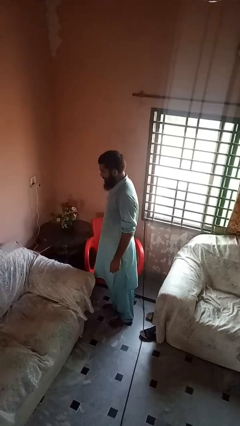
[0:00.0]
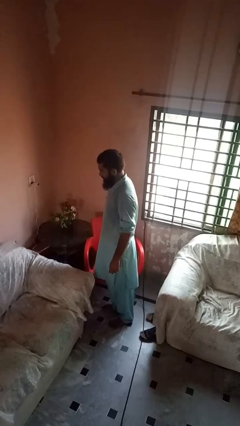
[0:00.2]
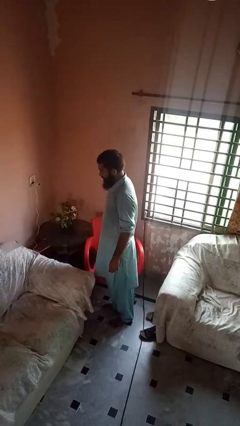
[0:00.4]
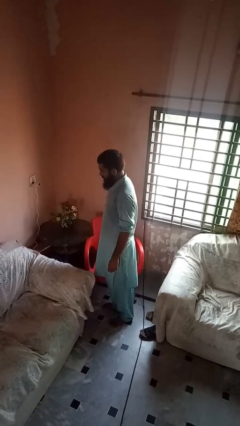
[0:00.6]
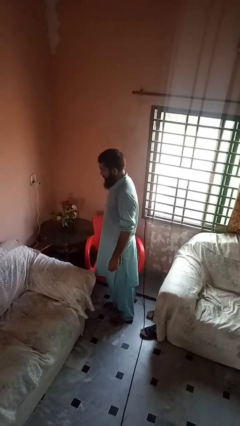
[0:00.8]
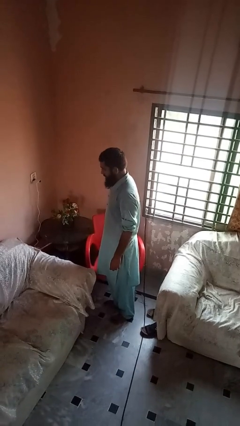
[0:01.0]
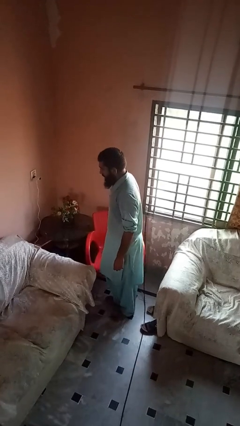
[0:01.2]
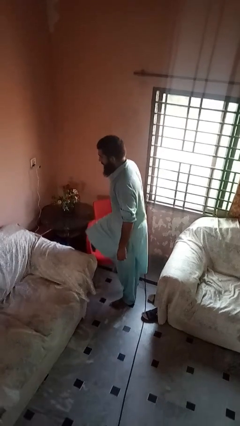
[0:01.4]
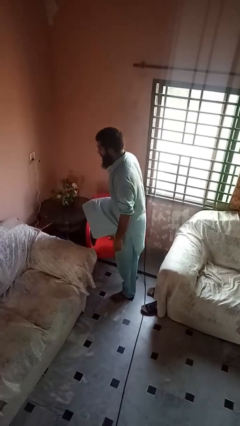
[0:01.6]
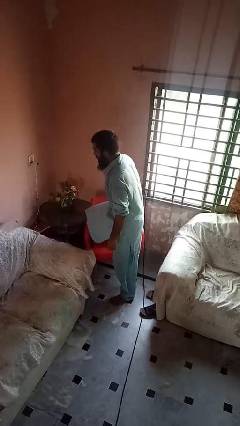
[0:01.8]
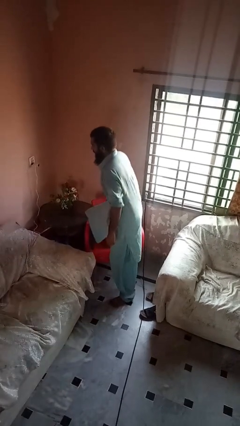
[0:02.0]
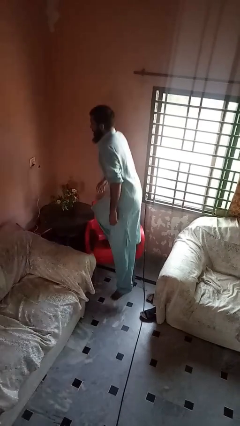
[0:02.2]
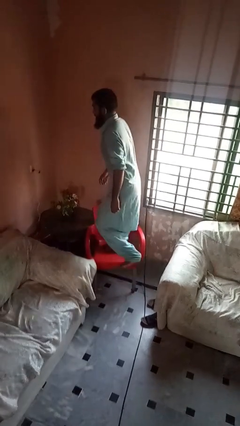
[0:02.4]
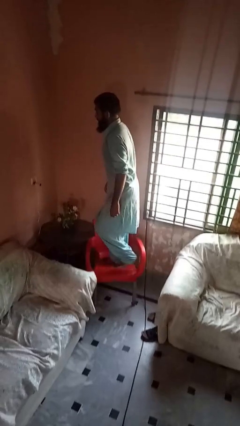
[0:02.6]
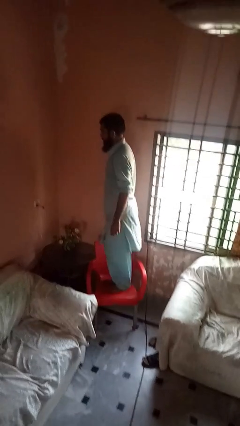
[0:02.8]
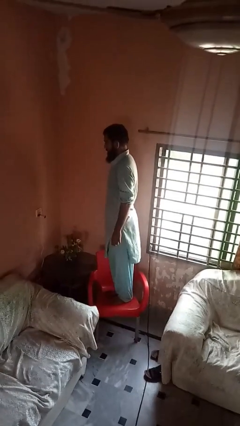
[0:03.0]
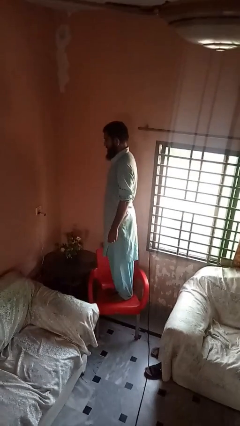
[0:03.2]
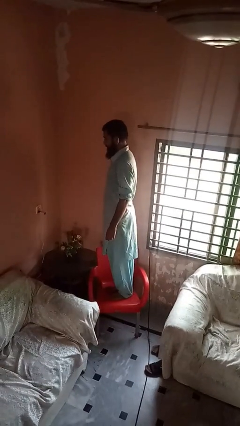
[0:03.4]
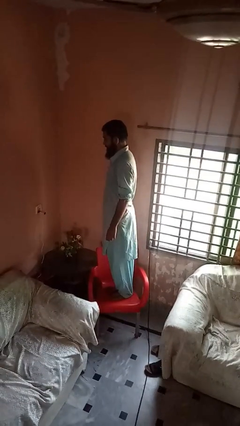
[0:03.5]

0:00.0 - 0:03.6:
person climbs on chair

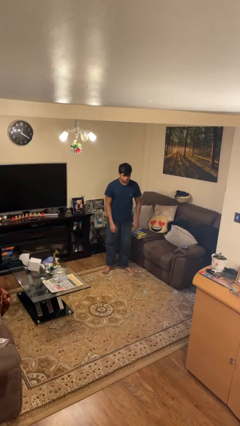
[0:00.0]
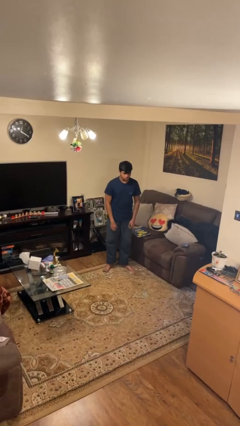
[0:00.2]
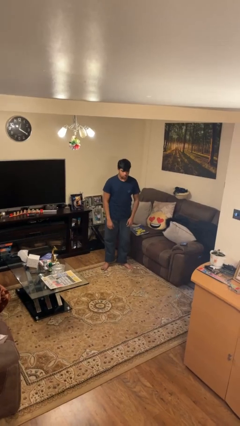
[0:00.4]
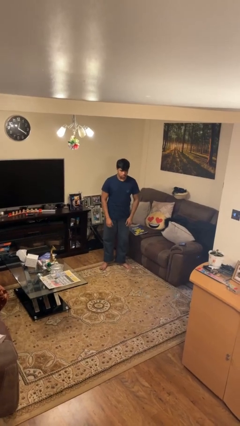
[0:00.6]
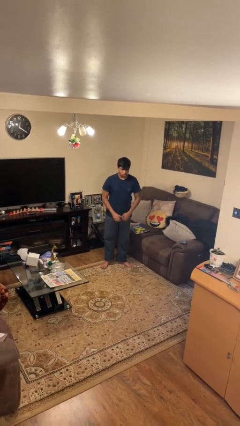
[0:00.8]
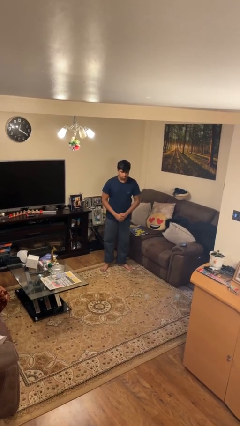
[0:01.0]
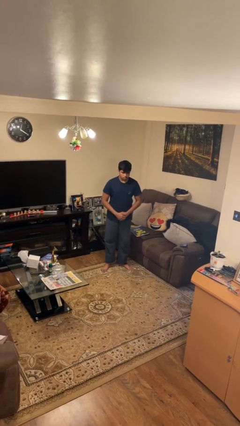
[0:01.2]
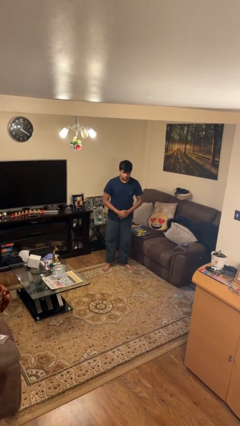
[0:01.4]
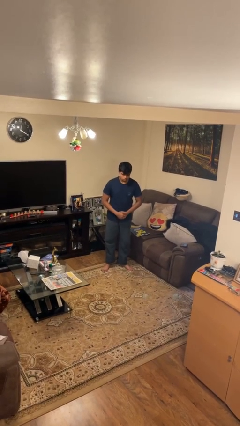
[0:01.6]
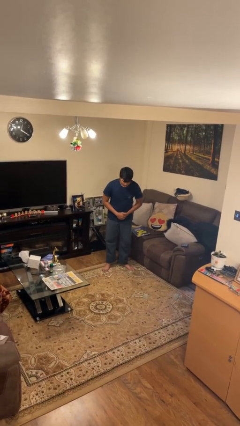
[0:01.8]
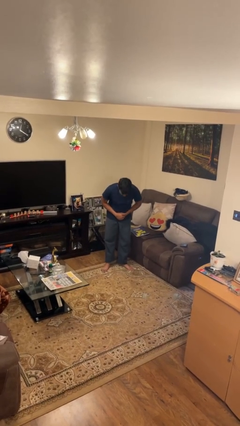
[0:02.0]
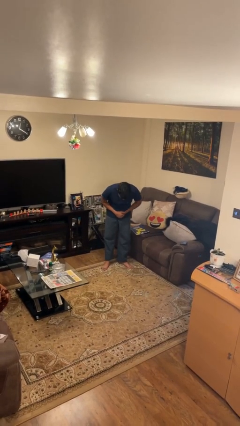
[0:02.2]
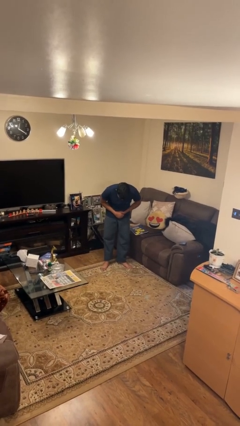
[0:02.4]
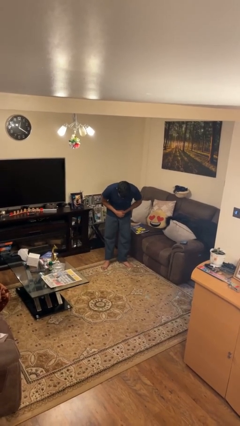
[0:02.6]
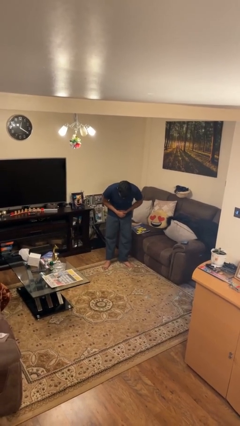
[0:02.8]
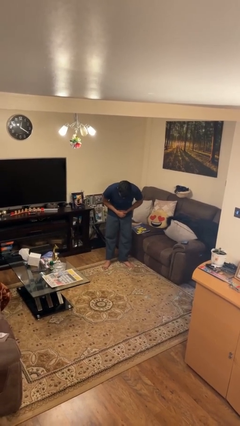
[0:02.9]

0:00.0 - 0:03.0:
person bows

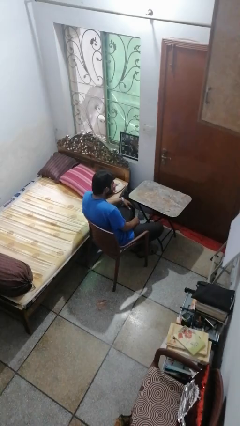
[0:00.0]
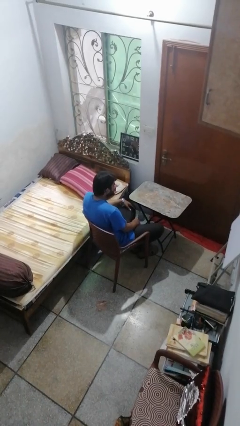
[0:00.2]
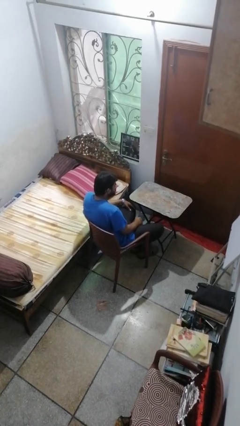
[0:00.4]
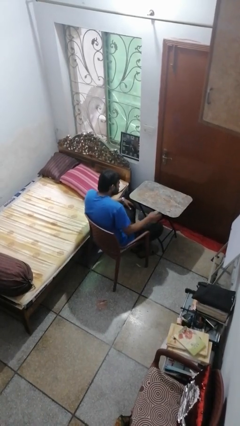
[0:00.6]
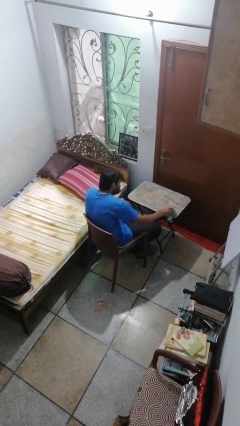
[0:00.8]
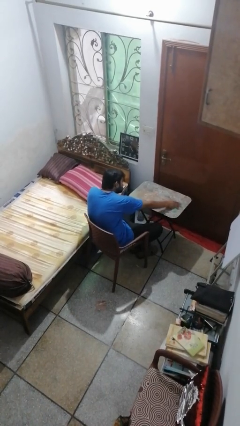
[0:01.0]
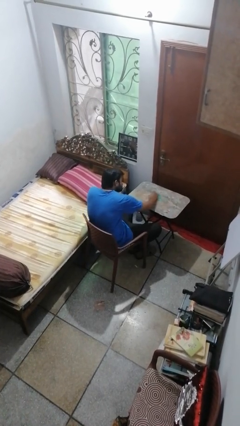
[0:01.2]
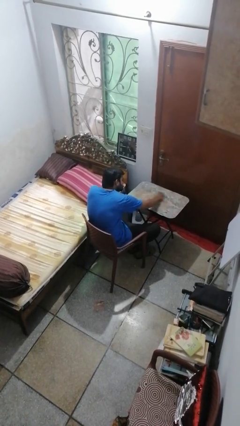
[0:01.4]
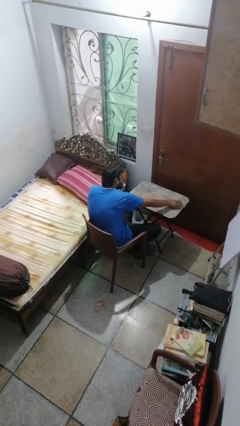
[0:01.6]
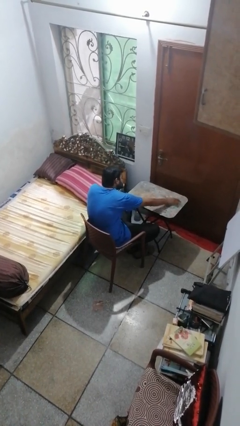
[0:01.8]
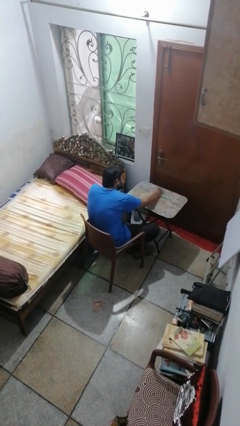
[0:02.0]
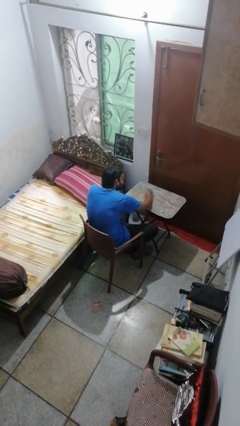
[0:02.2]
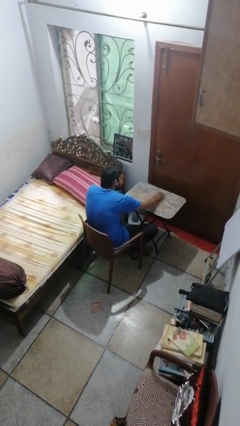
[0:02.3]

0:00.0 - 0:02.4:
person cleans table with rag

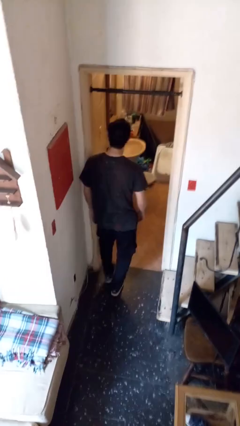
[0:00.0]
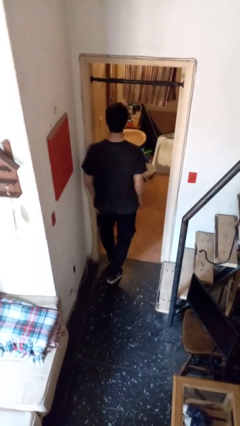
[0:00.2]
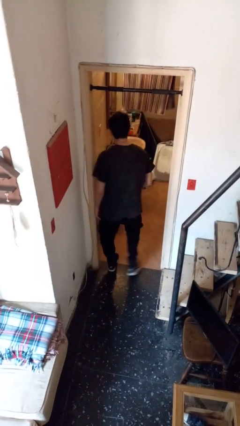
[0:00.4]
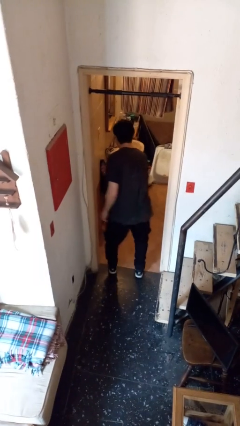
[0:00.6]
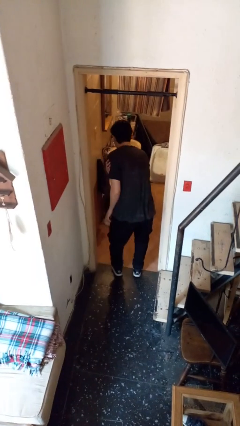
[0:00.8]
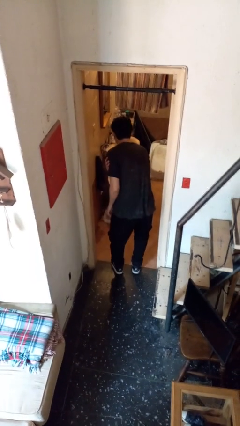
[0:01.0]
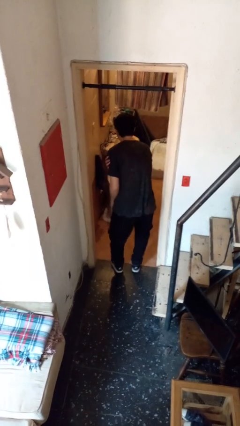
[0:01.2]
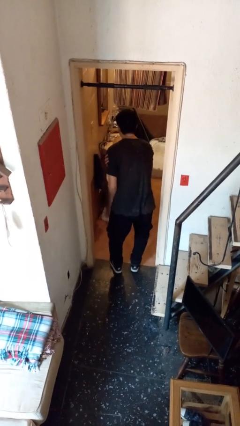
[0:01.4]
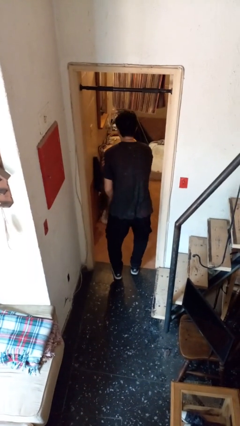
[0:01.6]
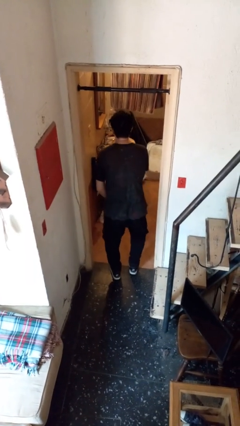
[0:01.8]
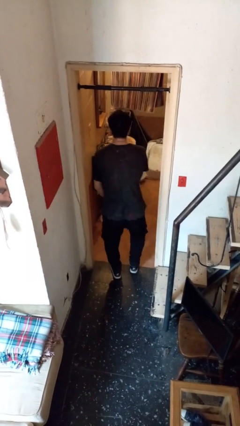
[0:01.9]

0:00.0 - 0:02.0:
person bumps into wall

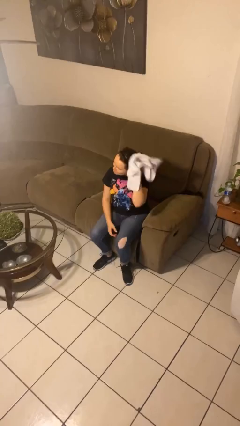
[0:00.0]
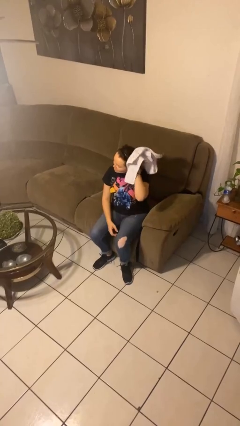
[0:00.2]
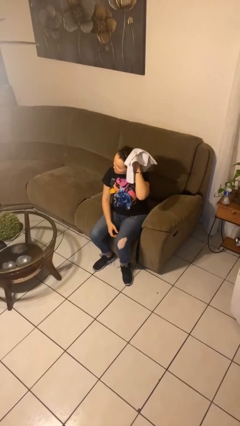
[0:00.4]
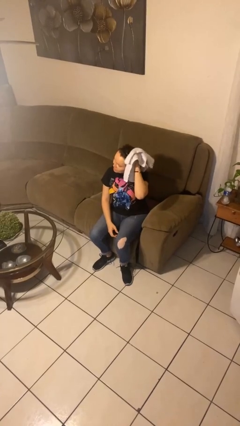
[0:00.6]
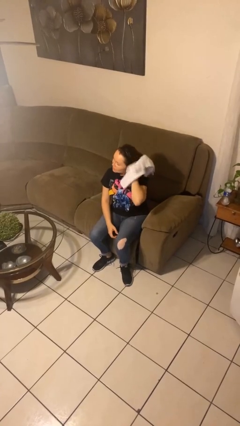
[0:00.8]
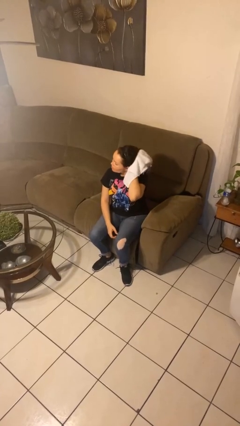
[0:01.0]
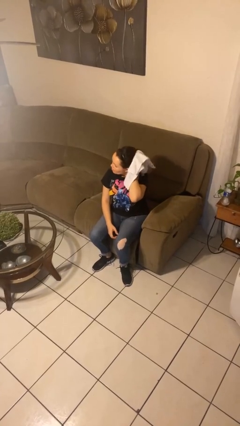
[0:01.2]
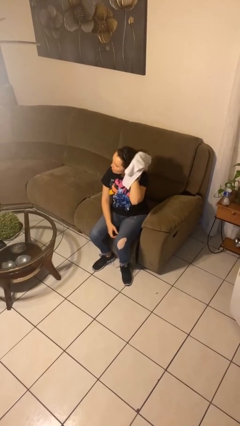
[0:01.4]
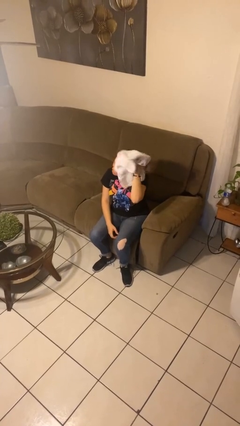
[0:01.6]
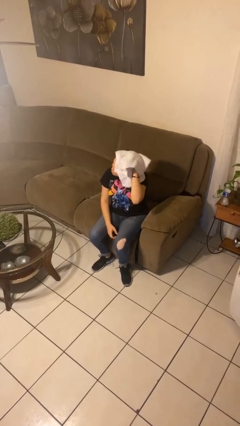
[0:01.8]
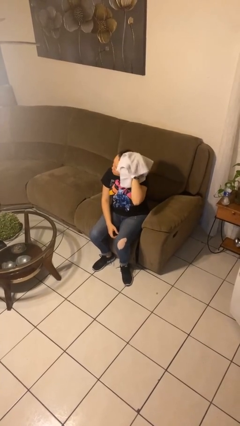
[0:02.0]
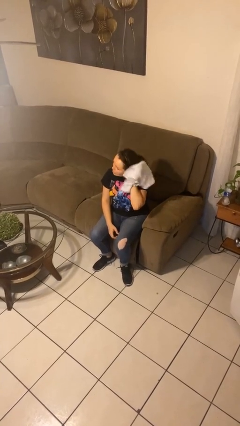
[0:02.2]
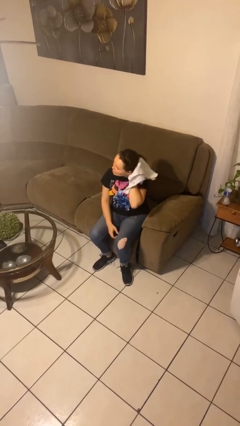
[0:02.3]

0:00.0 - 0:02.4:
person dries hair with towel

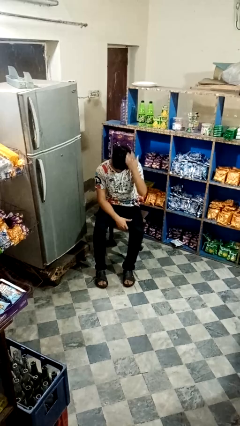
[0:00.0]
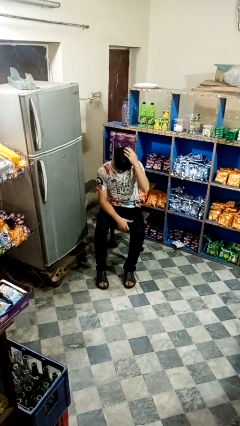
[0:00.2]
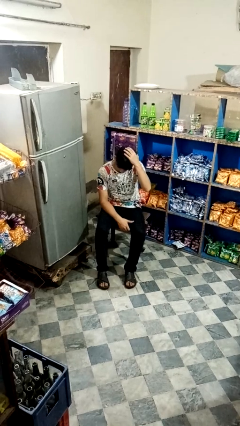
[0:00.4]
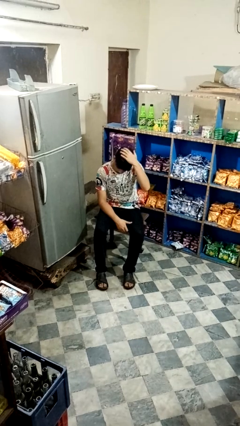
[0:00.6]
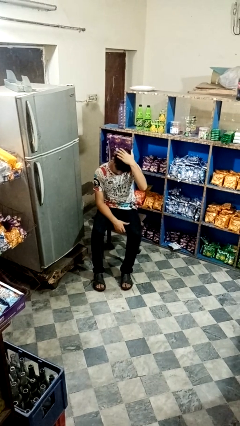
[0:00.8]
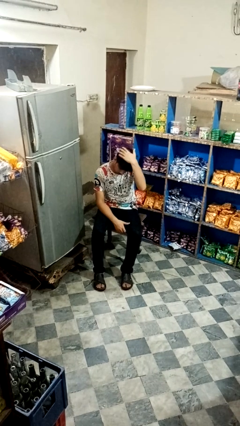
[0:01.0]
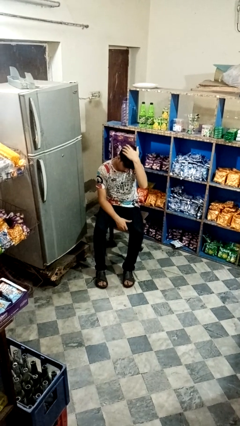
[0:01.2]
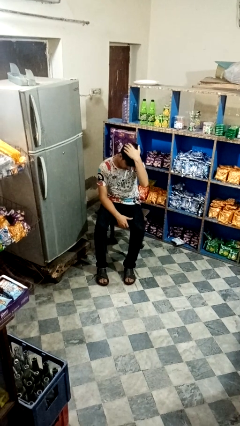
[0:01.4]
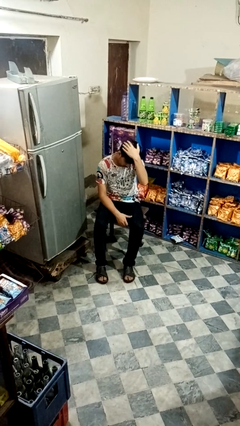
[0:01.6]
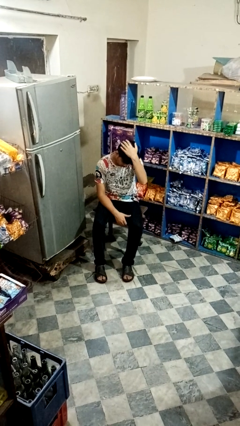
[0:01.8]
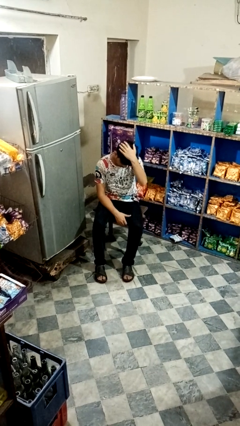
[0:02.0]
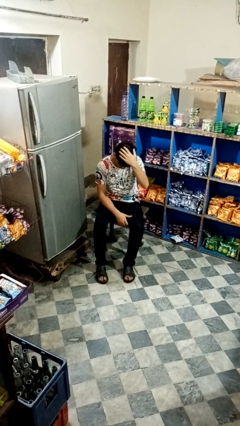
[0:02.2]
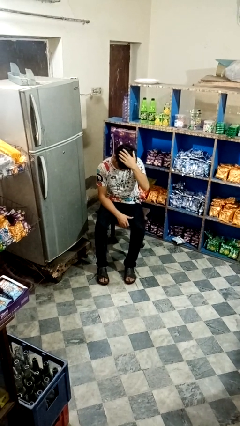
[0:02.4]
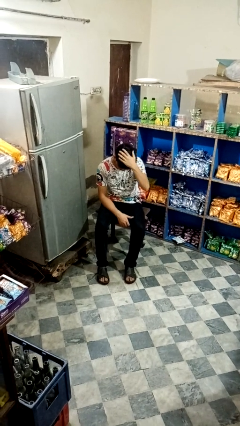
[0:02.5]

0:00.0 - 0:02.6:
person pats head

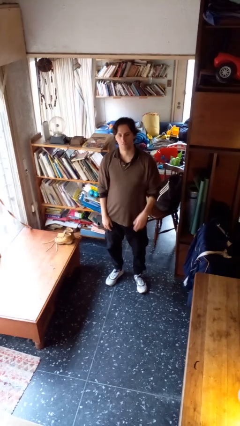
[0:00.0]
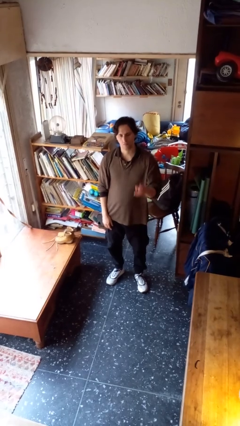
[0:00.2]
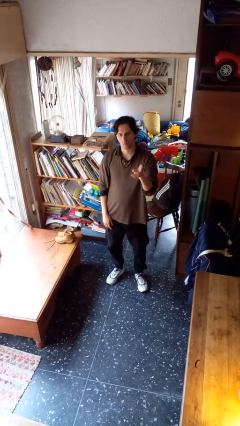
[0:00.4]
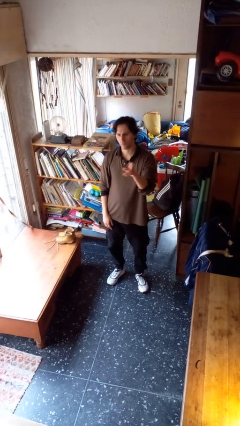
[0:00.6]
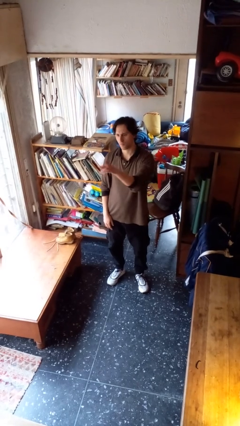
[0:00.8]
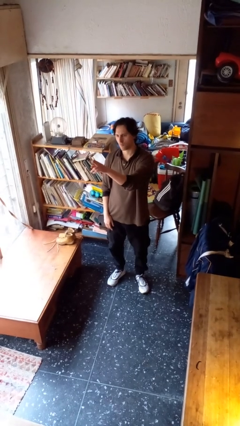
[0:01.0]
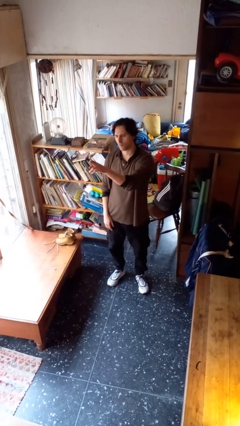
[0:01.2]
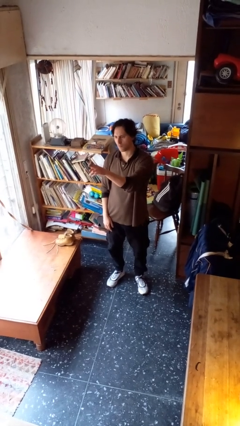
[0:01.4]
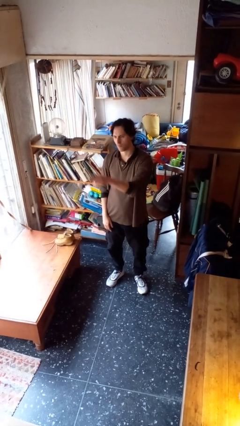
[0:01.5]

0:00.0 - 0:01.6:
person gestures swipe right
